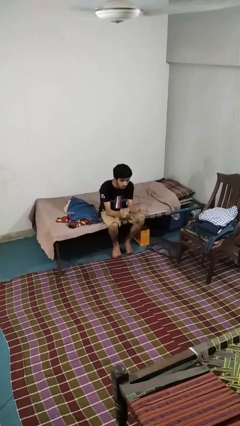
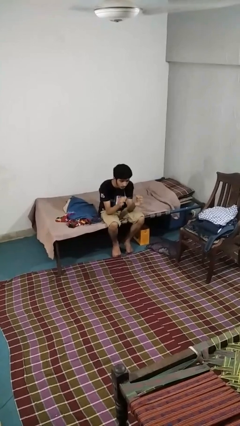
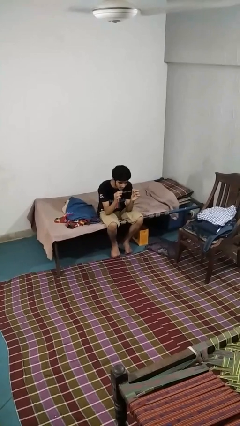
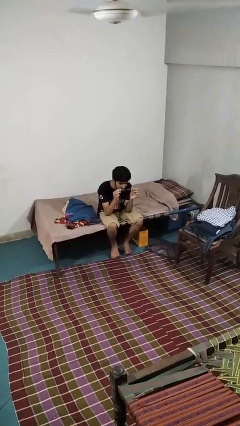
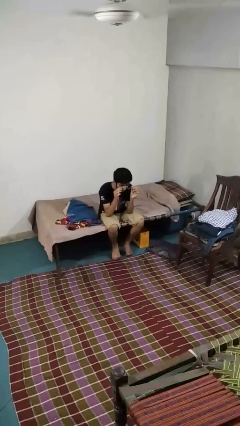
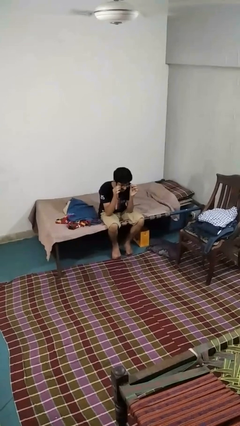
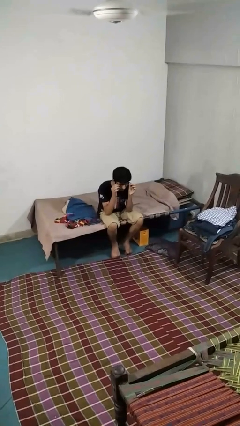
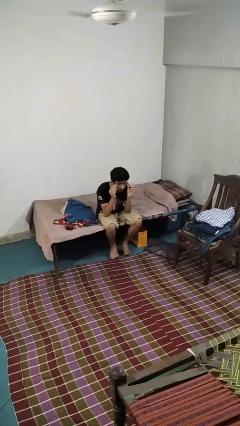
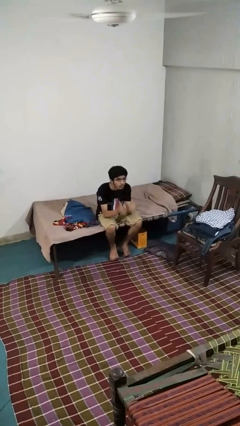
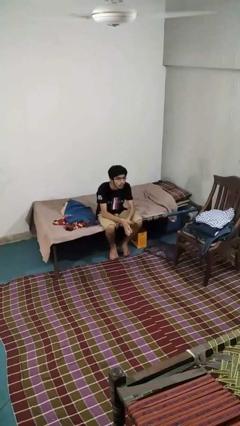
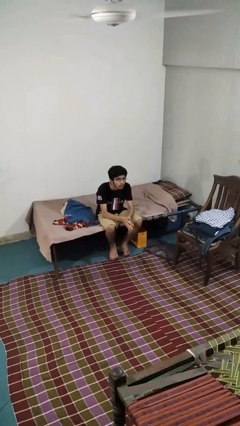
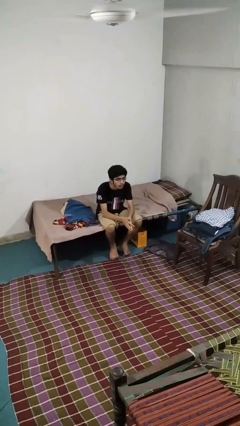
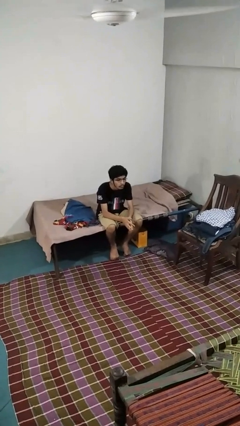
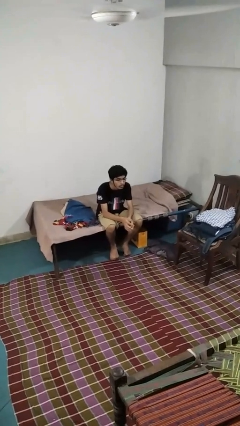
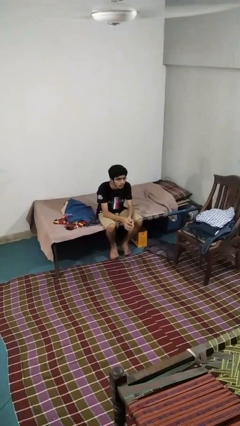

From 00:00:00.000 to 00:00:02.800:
person puts on glasses

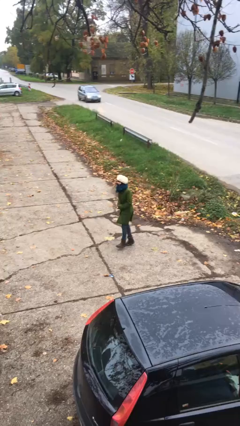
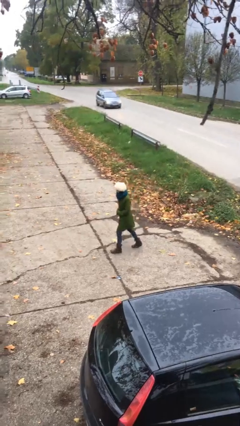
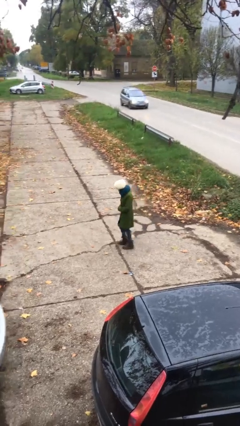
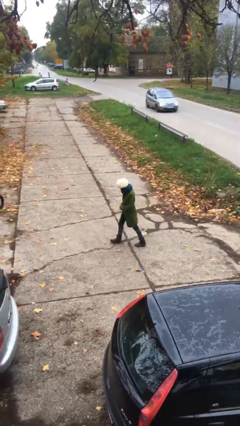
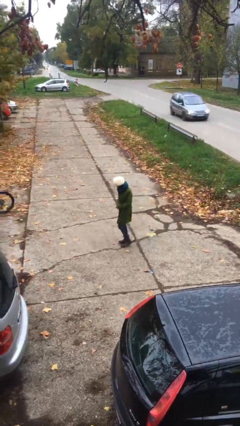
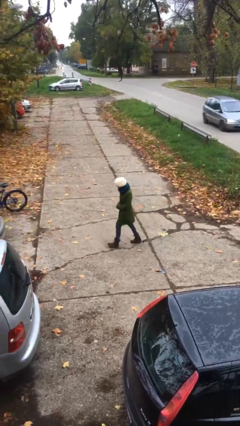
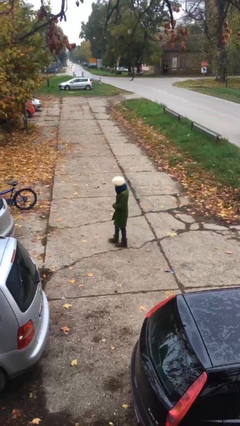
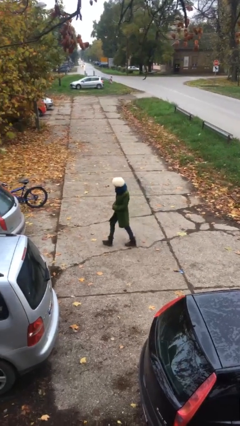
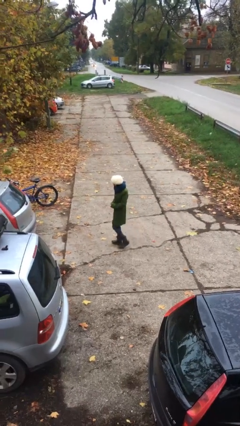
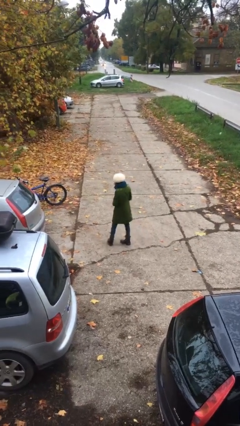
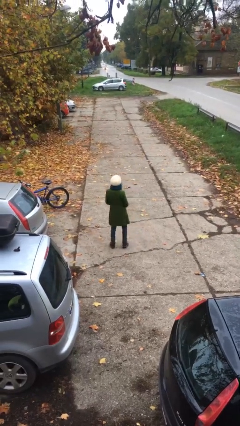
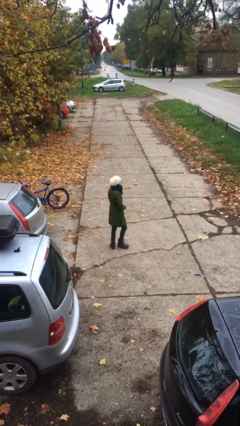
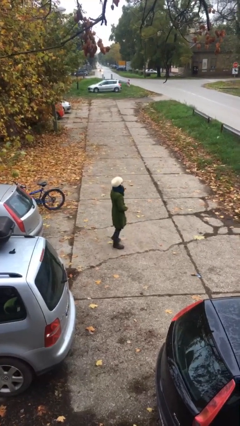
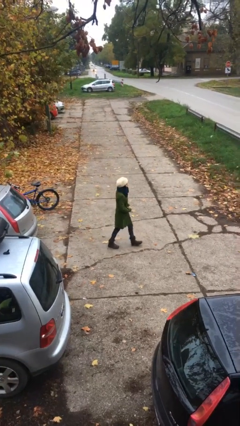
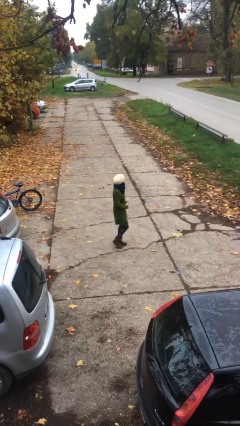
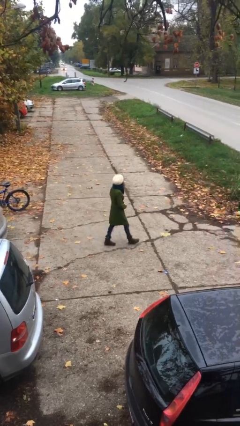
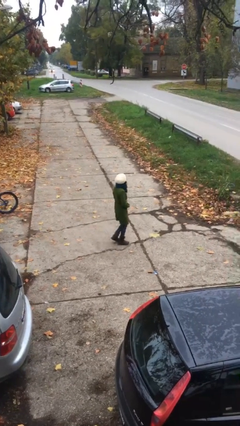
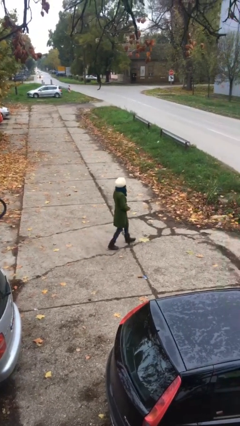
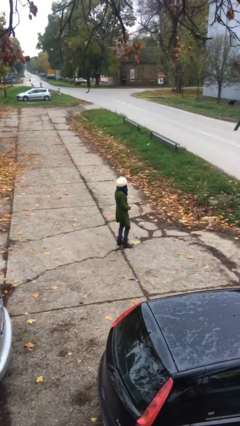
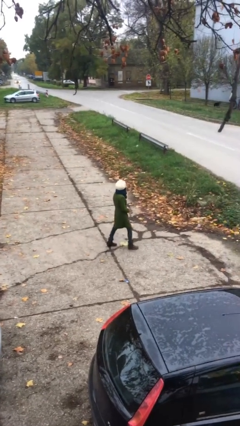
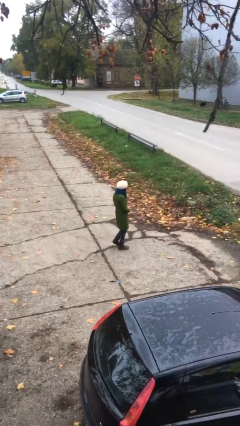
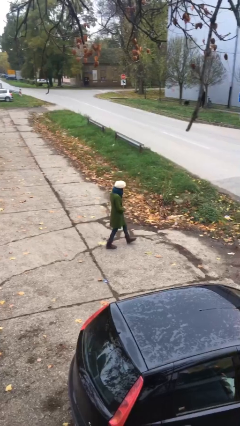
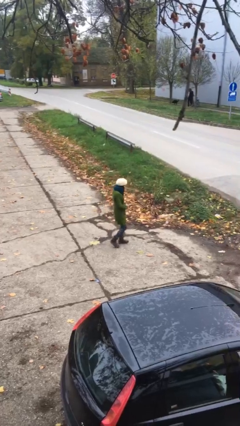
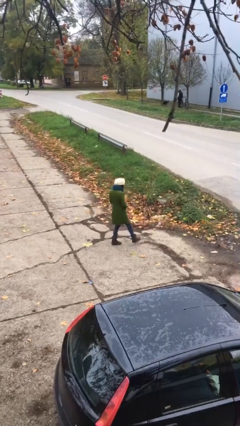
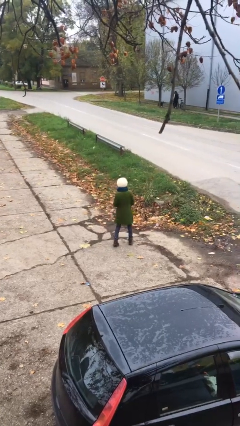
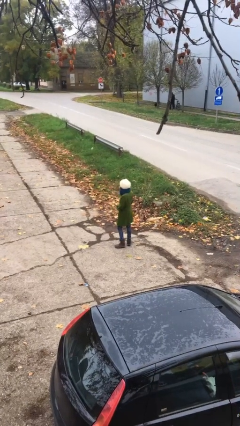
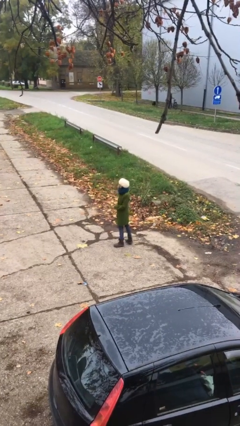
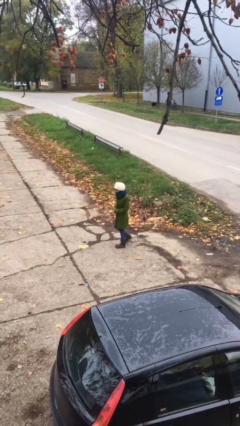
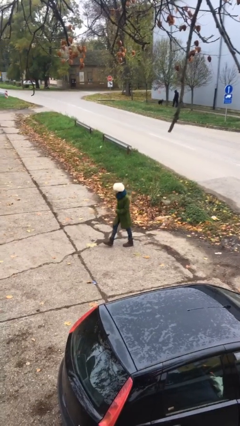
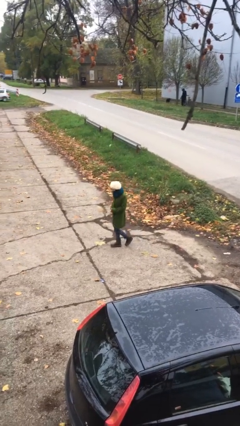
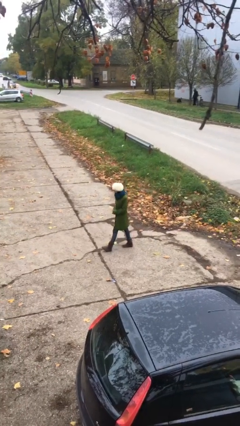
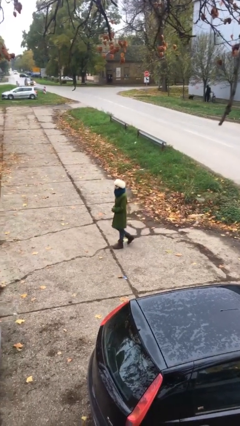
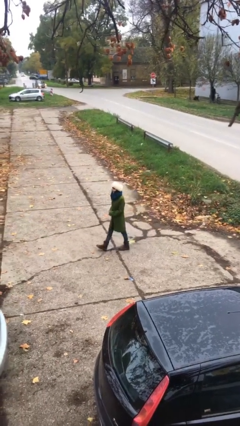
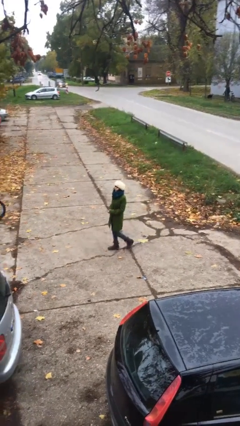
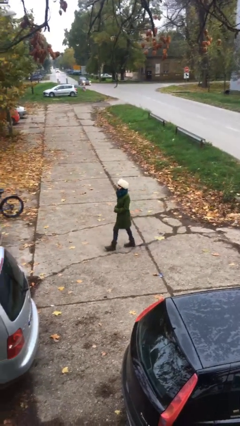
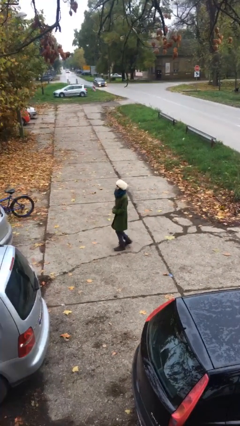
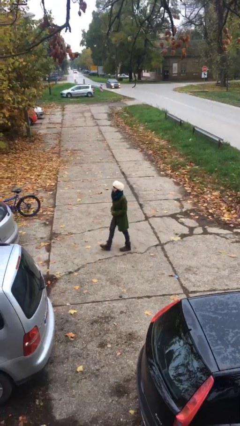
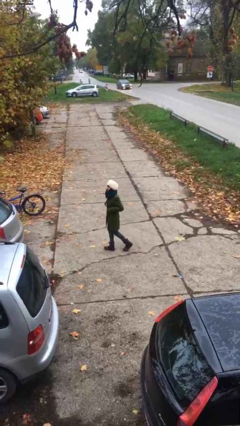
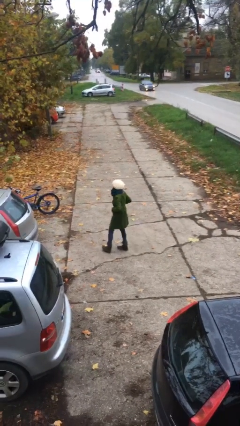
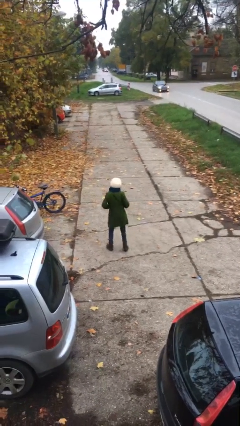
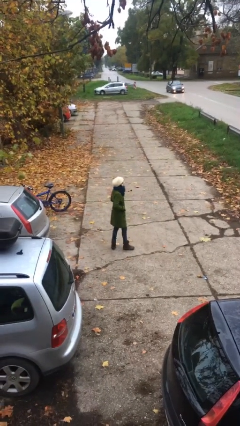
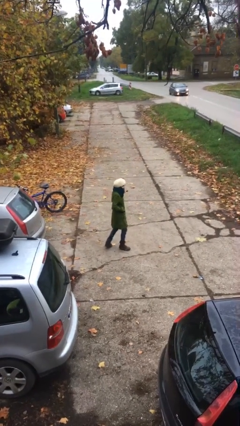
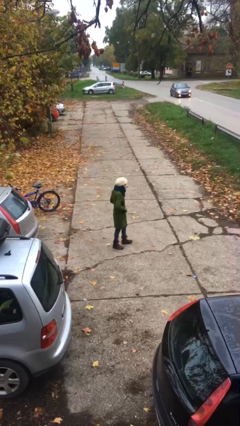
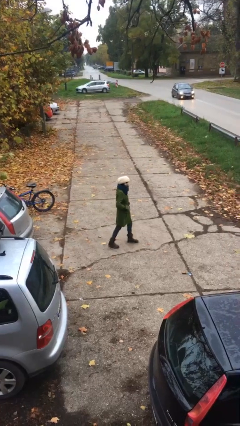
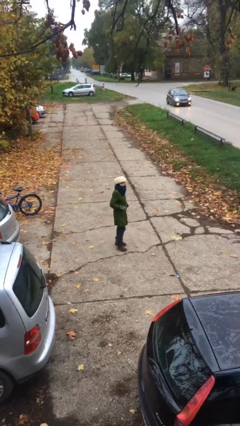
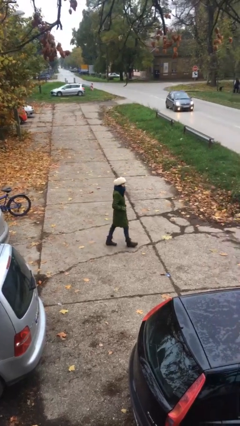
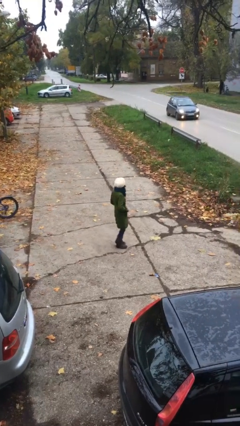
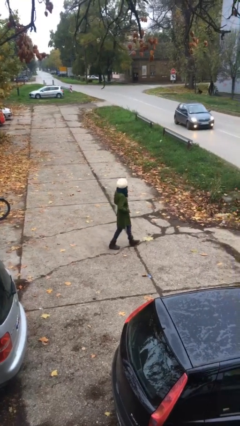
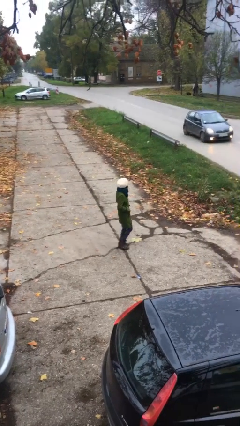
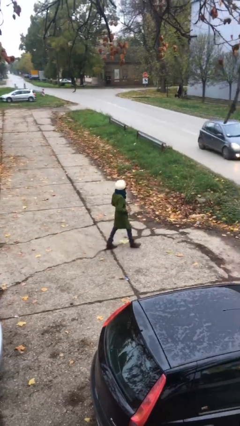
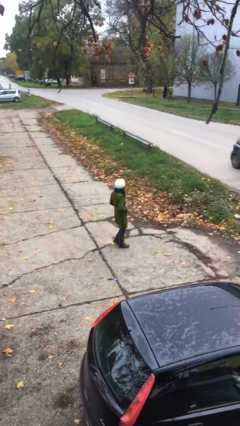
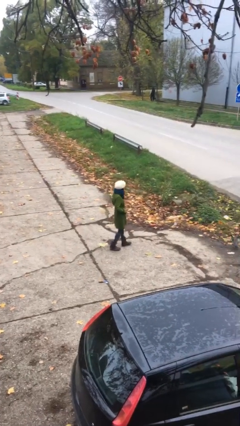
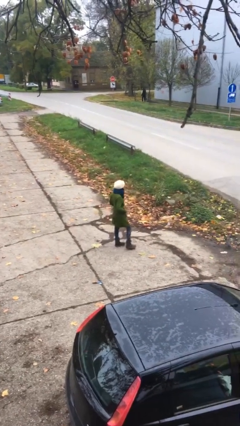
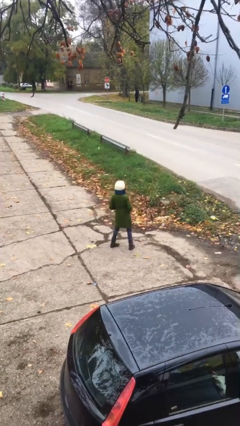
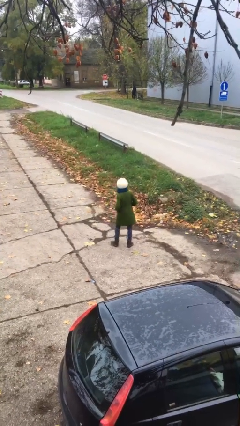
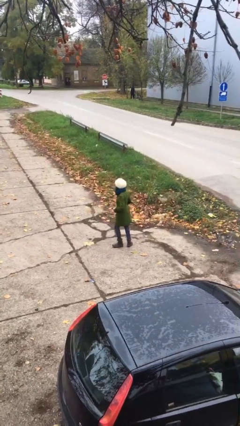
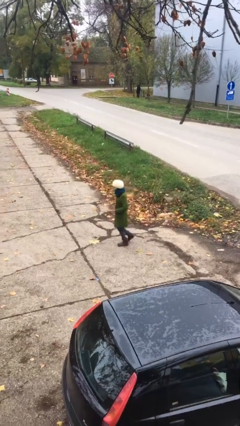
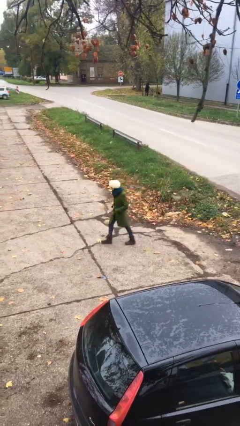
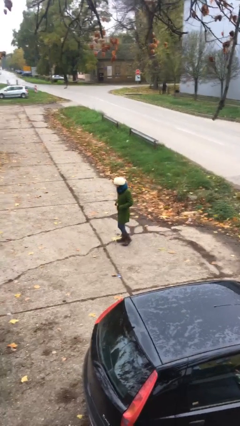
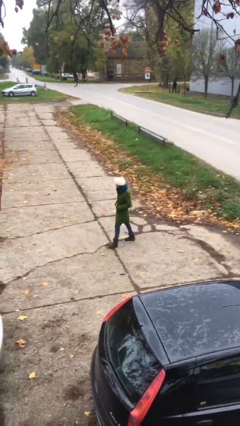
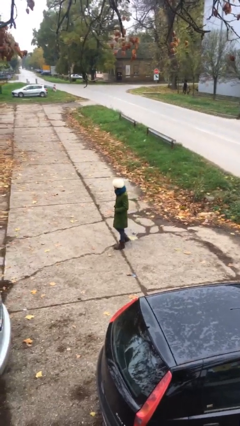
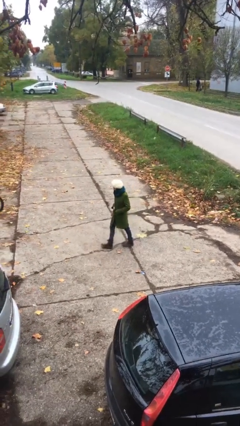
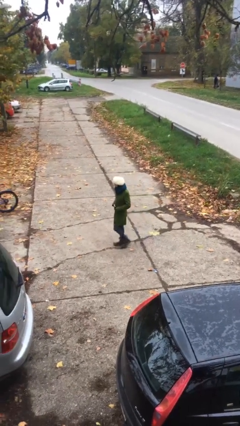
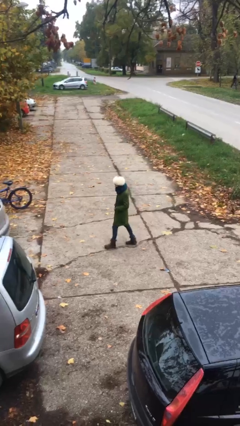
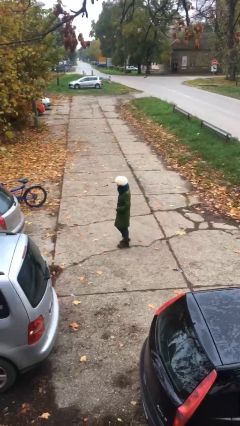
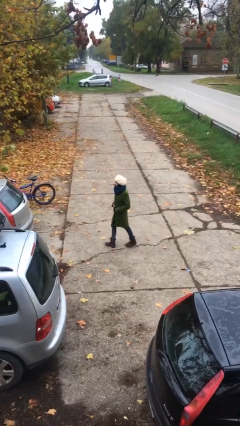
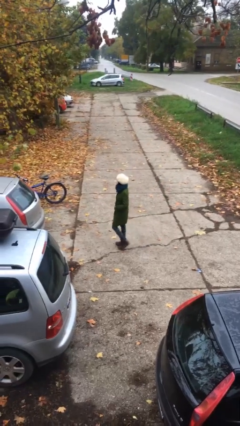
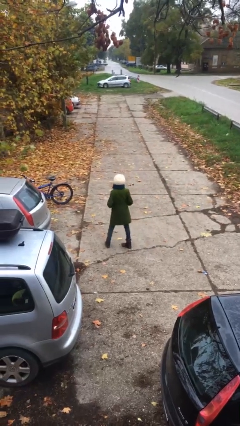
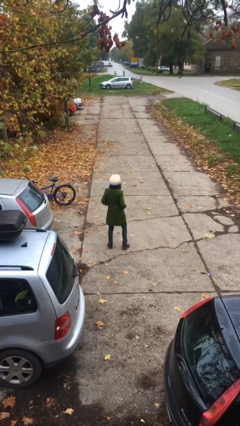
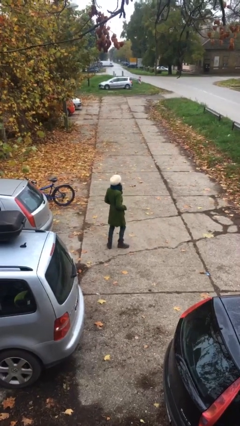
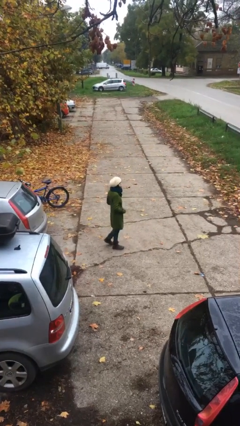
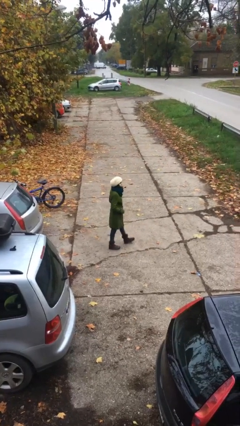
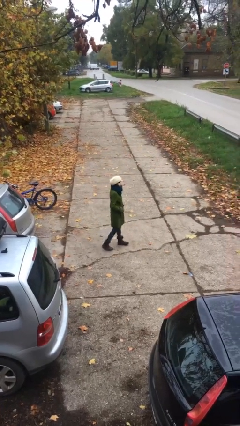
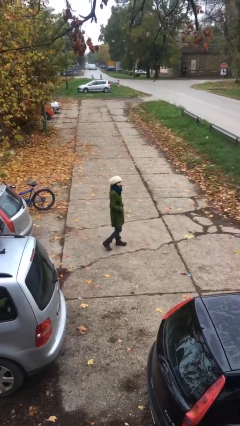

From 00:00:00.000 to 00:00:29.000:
person walks

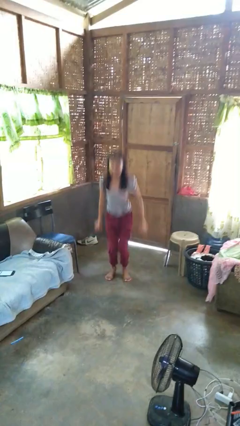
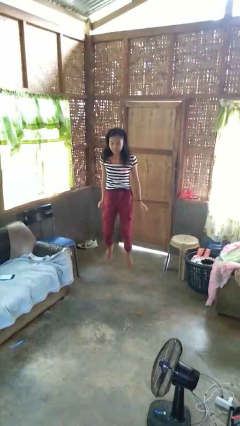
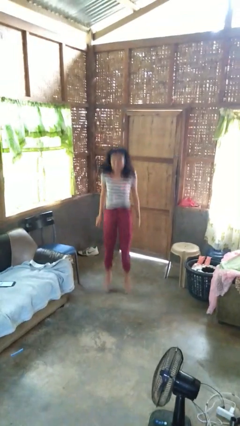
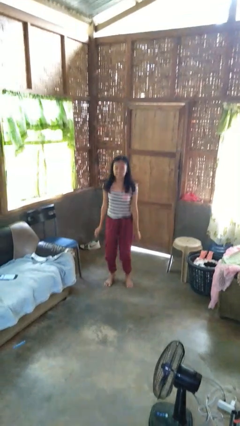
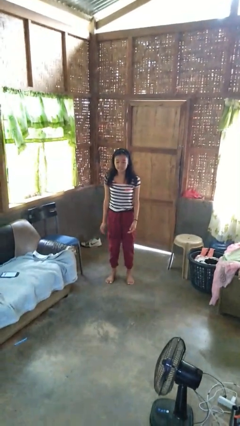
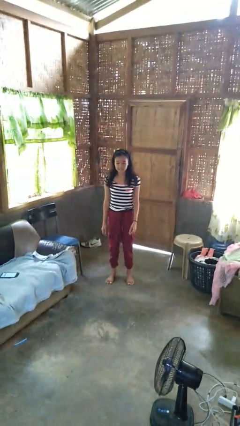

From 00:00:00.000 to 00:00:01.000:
person jumps
